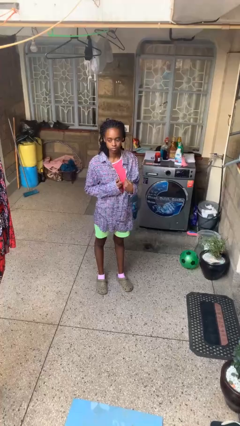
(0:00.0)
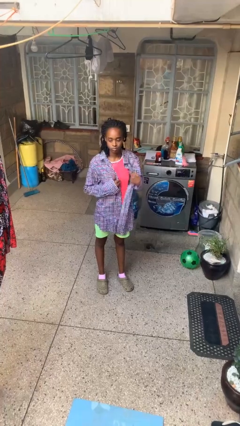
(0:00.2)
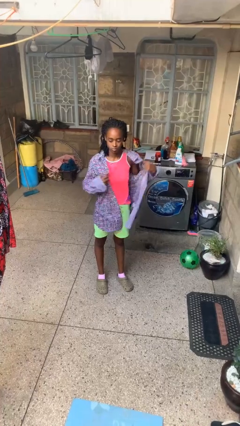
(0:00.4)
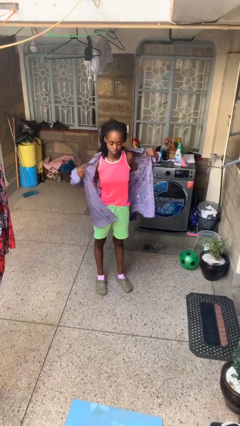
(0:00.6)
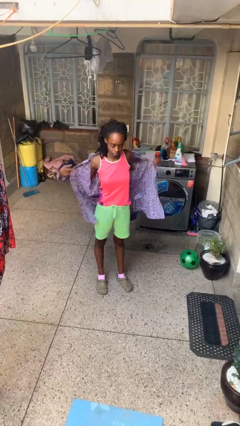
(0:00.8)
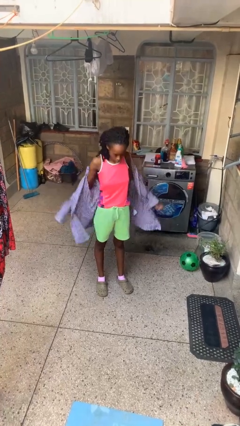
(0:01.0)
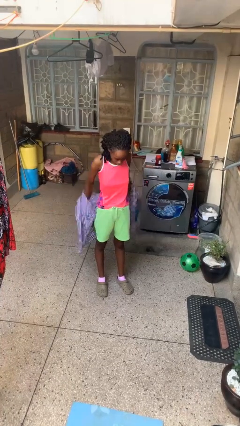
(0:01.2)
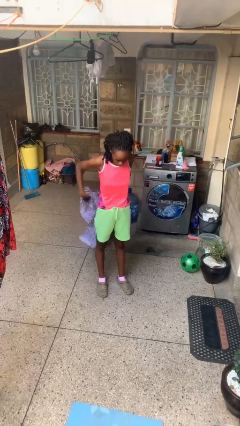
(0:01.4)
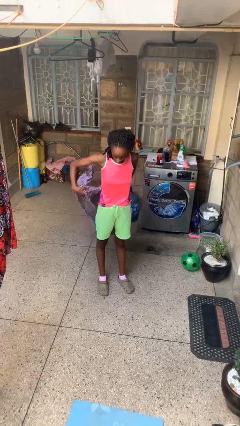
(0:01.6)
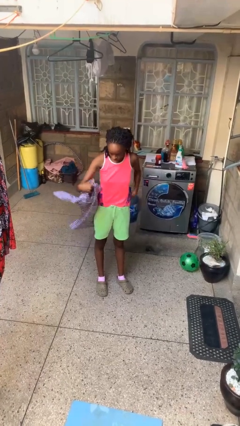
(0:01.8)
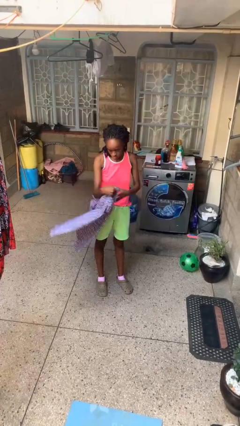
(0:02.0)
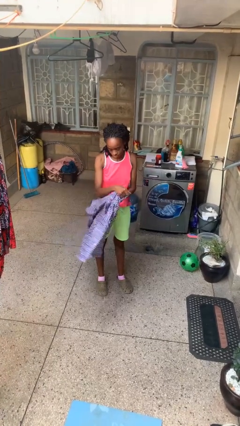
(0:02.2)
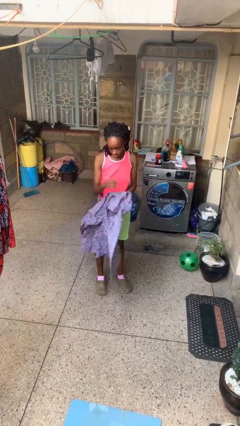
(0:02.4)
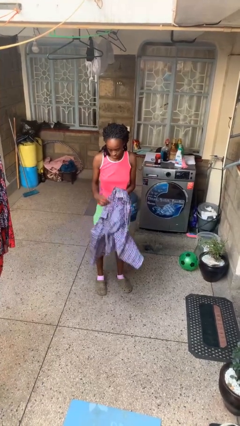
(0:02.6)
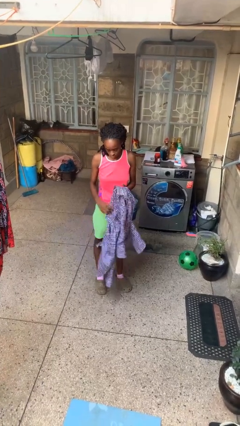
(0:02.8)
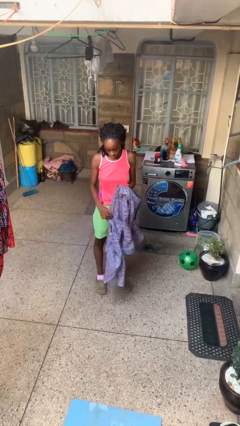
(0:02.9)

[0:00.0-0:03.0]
person takes off shirt

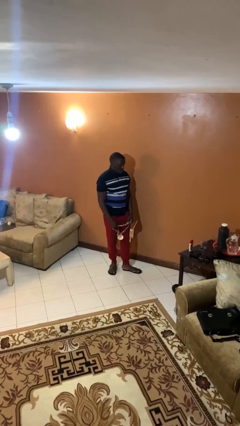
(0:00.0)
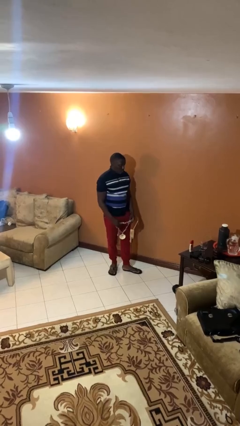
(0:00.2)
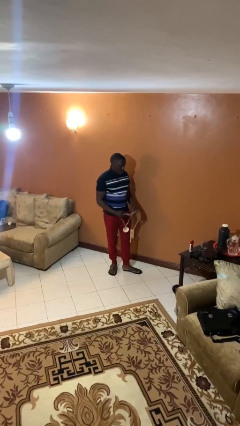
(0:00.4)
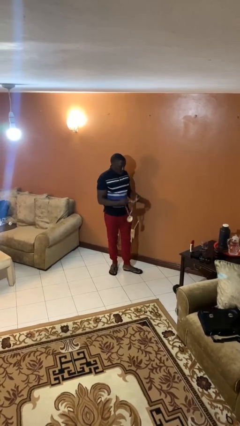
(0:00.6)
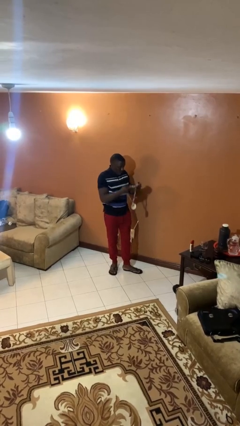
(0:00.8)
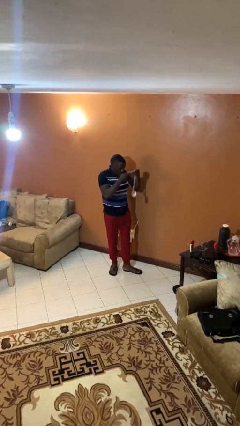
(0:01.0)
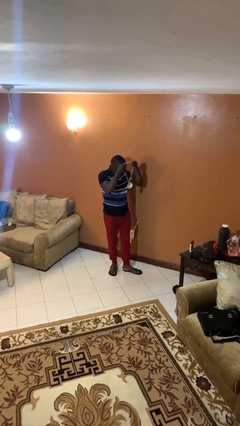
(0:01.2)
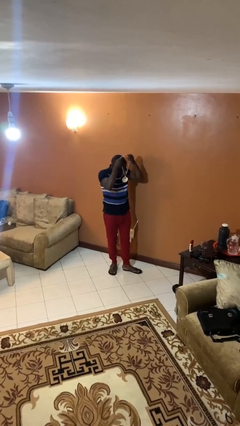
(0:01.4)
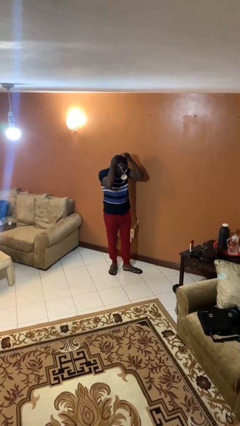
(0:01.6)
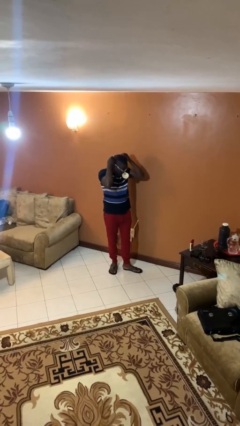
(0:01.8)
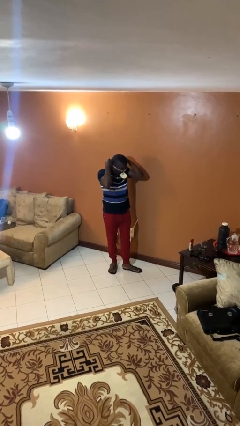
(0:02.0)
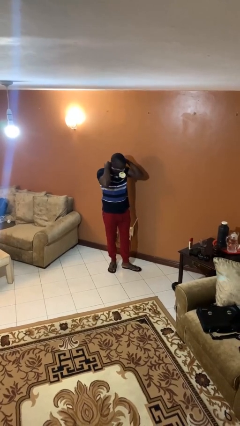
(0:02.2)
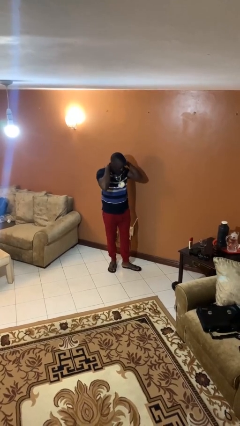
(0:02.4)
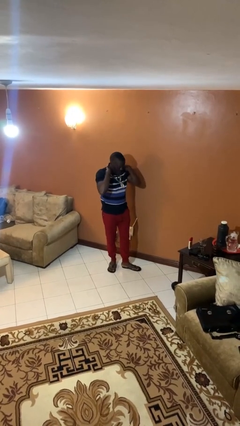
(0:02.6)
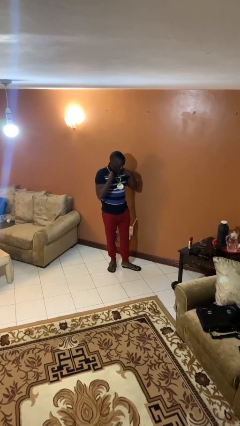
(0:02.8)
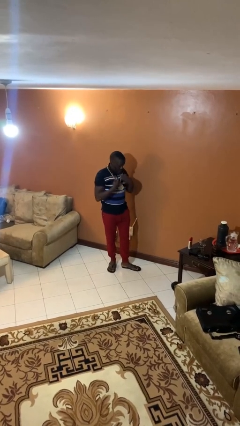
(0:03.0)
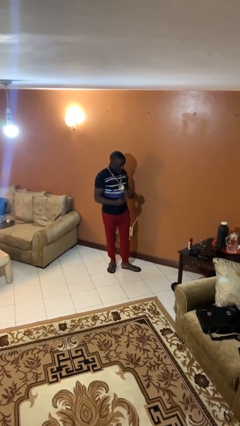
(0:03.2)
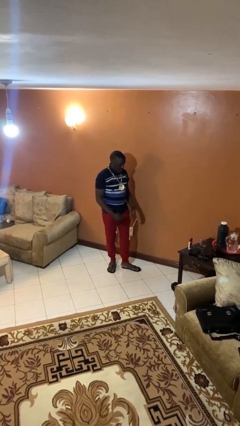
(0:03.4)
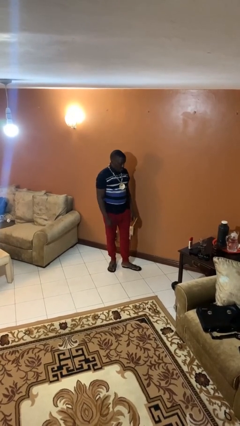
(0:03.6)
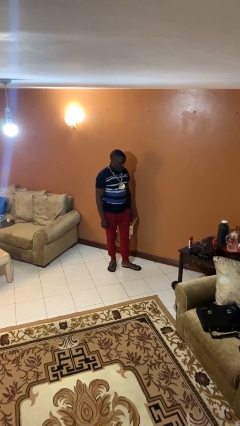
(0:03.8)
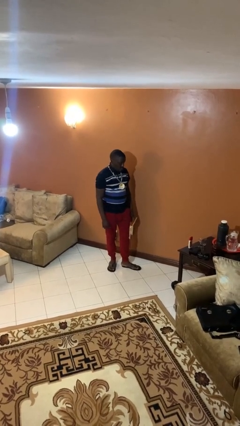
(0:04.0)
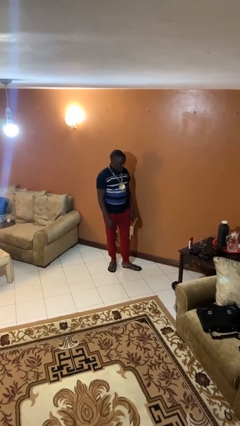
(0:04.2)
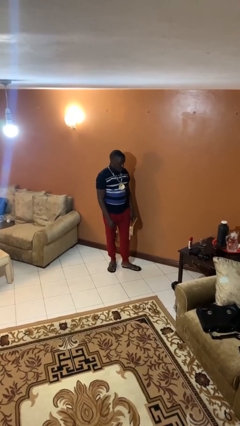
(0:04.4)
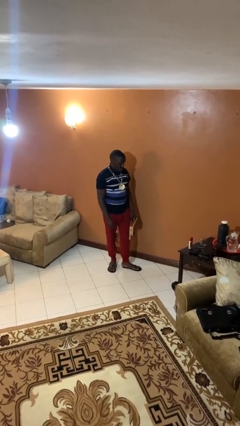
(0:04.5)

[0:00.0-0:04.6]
person puts on necklace

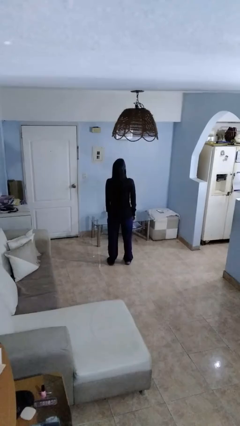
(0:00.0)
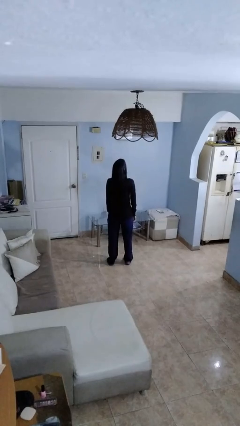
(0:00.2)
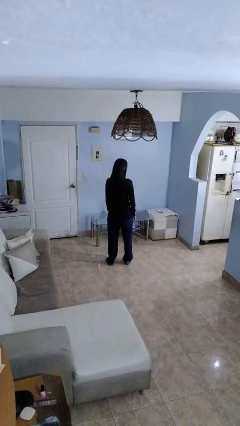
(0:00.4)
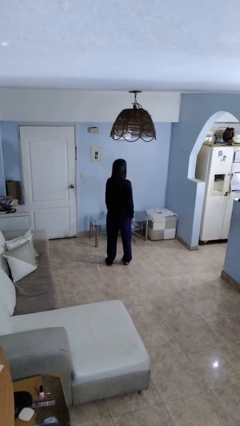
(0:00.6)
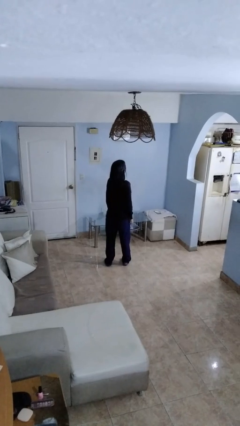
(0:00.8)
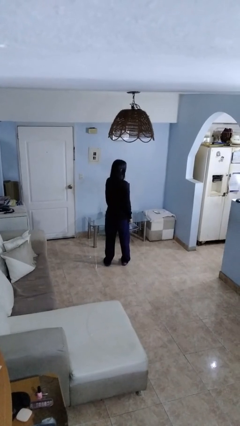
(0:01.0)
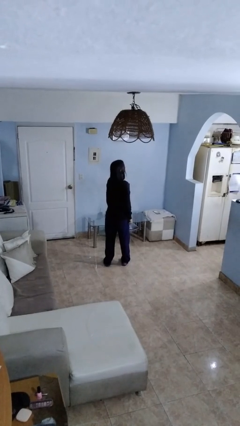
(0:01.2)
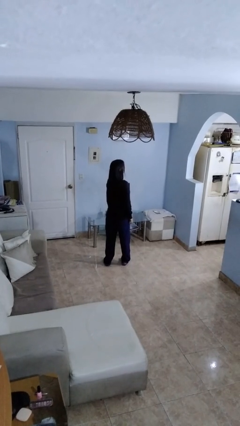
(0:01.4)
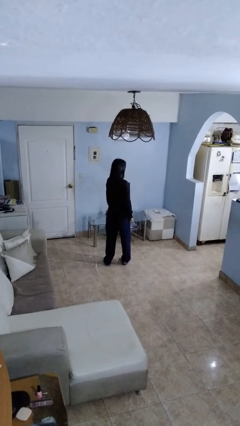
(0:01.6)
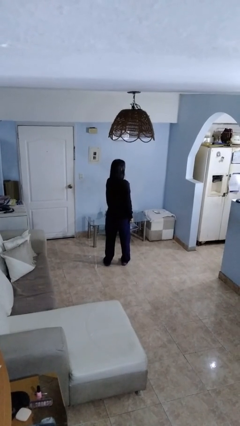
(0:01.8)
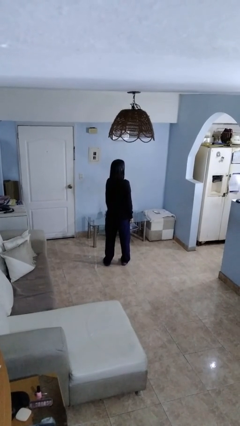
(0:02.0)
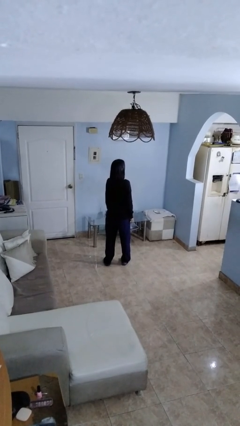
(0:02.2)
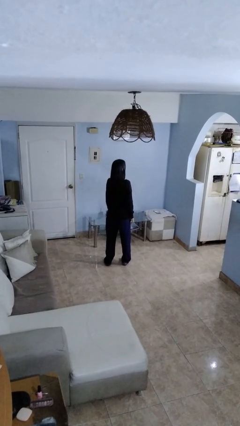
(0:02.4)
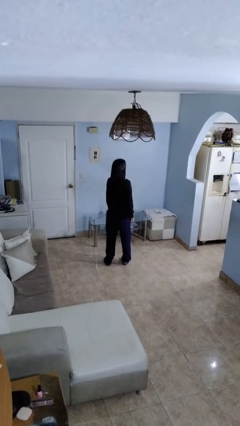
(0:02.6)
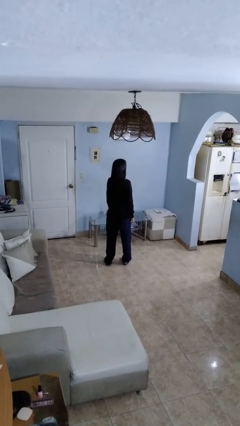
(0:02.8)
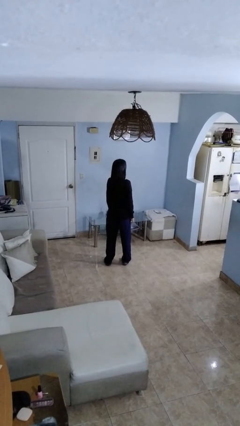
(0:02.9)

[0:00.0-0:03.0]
person nods head

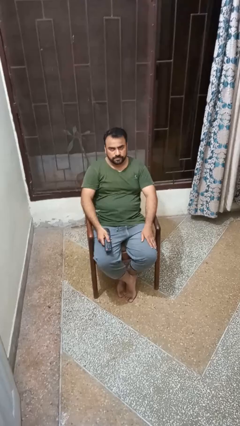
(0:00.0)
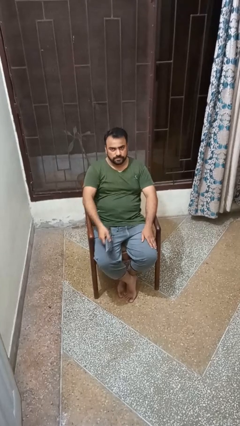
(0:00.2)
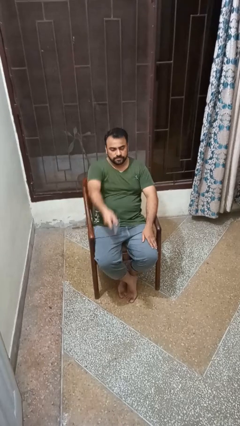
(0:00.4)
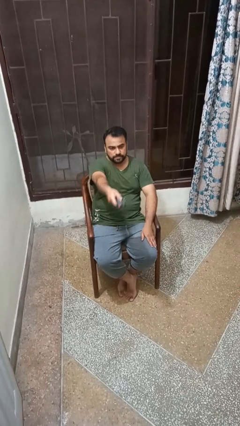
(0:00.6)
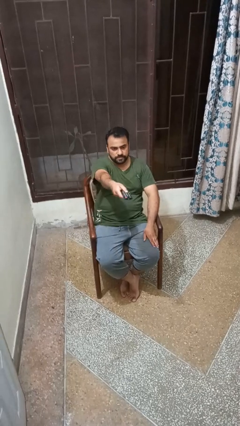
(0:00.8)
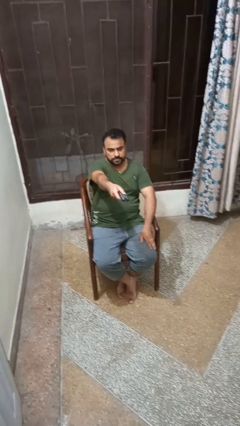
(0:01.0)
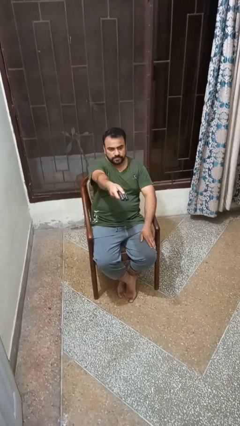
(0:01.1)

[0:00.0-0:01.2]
person uses television remote

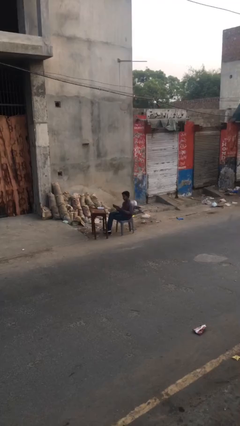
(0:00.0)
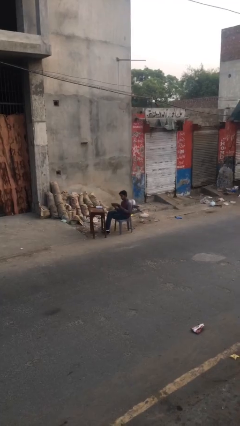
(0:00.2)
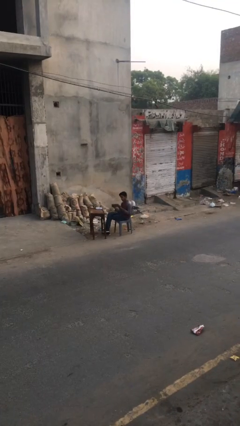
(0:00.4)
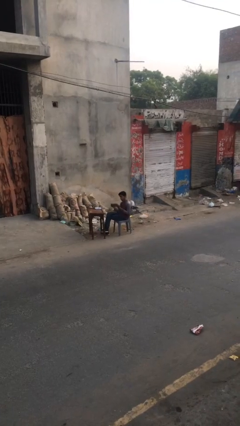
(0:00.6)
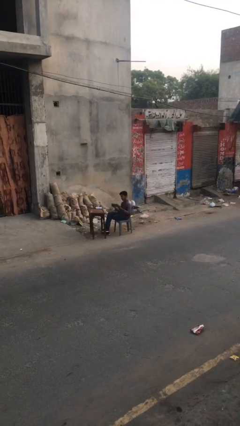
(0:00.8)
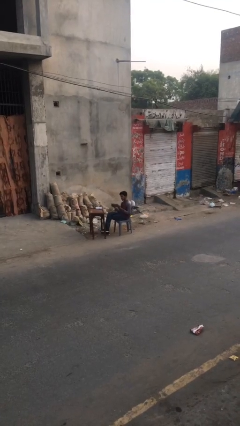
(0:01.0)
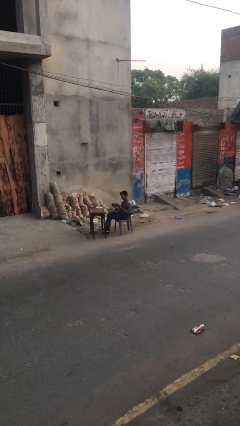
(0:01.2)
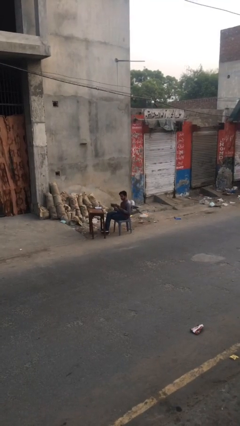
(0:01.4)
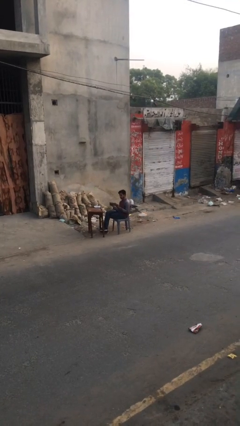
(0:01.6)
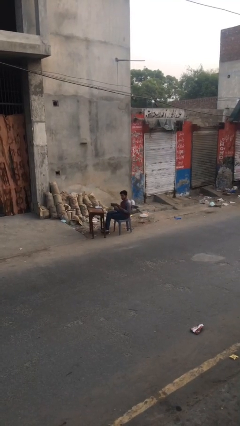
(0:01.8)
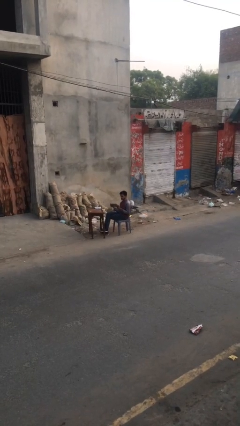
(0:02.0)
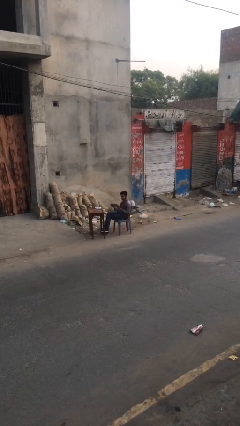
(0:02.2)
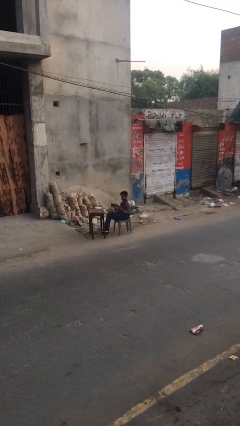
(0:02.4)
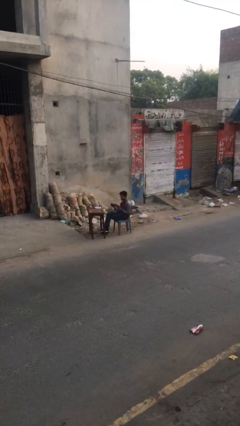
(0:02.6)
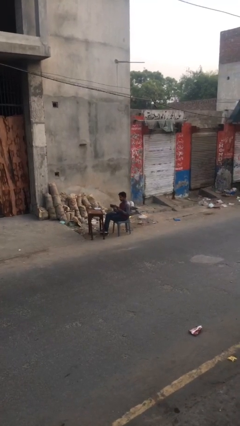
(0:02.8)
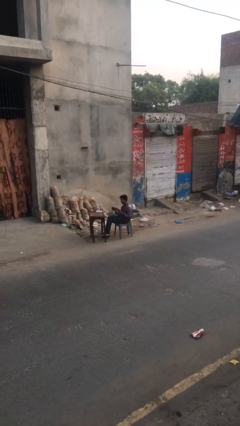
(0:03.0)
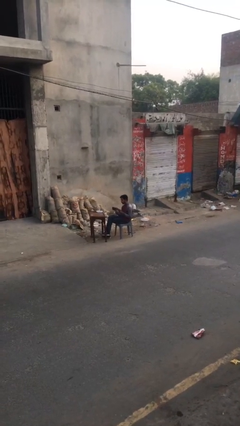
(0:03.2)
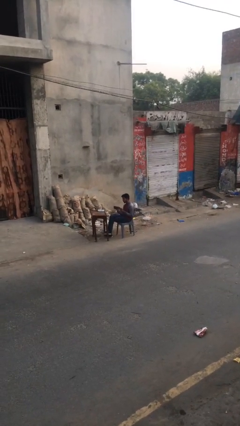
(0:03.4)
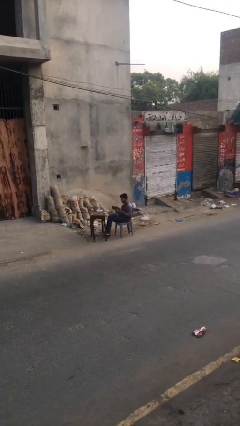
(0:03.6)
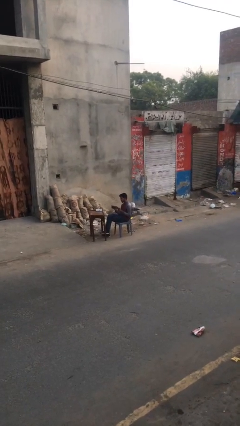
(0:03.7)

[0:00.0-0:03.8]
person reads document

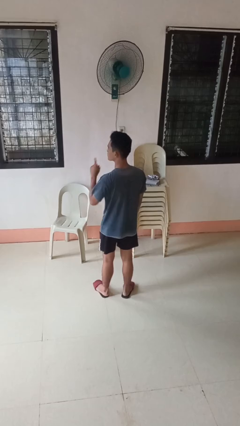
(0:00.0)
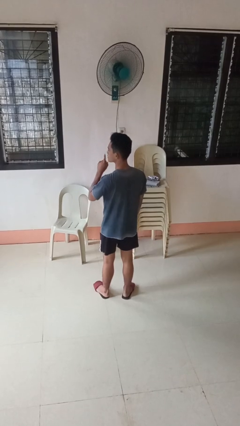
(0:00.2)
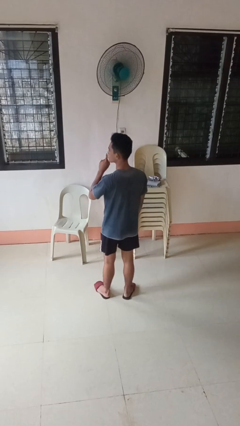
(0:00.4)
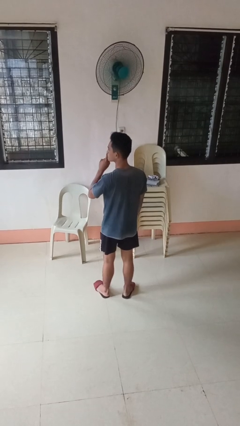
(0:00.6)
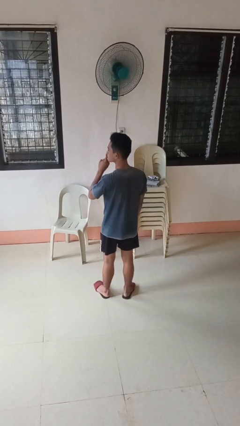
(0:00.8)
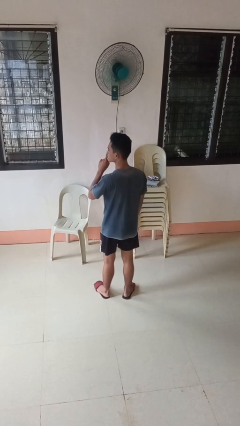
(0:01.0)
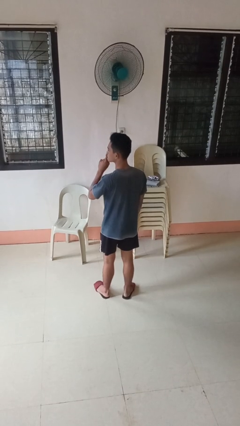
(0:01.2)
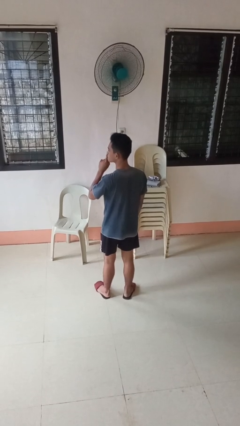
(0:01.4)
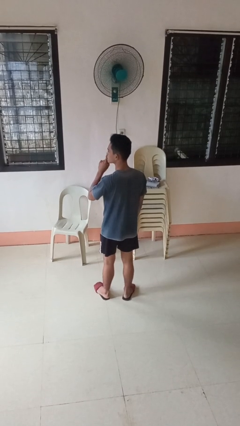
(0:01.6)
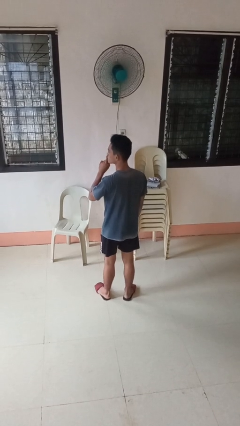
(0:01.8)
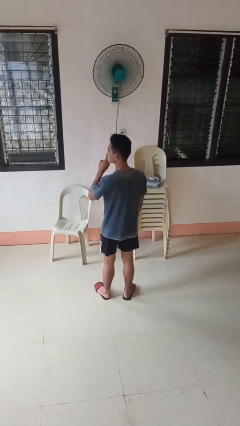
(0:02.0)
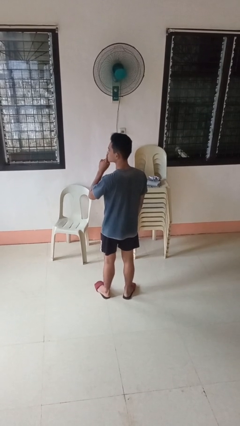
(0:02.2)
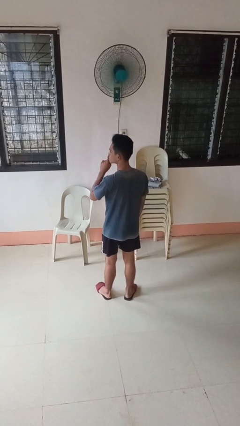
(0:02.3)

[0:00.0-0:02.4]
person gestures be quiet
